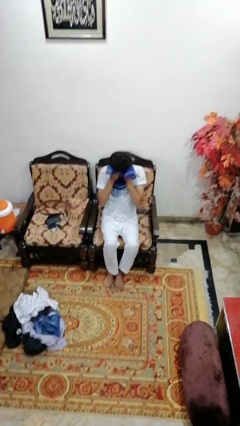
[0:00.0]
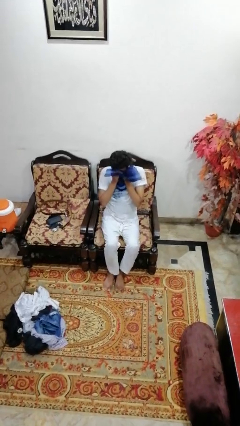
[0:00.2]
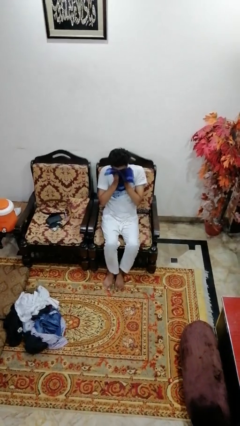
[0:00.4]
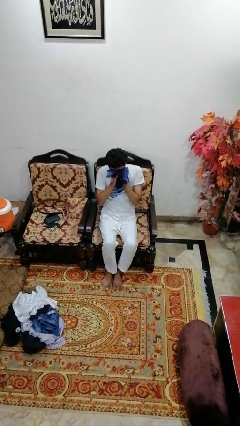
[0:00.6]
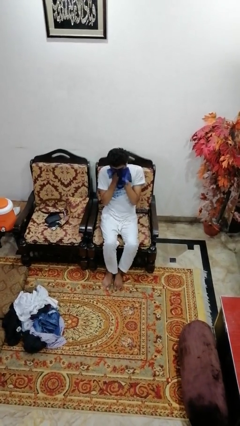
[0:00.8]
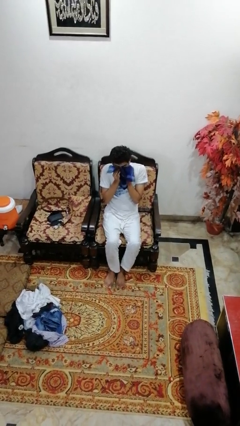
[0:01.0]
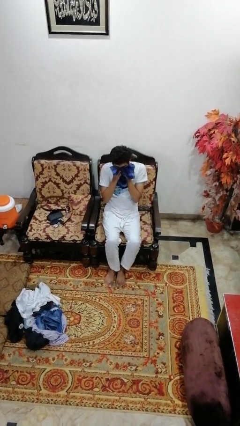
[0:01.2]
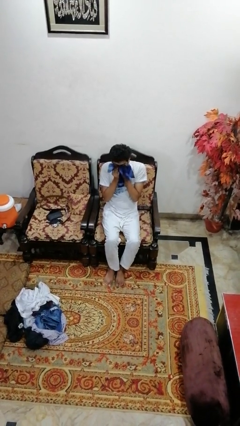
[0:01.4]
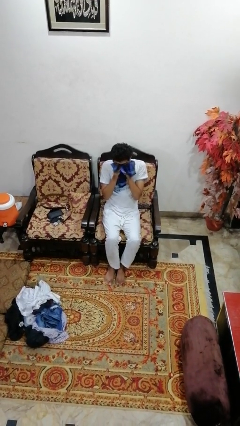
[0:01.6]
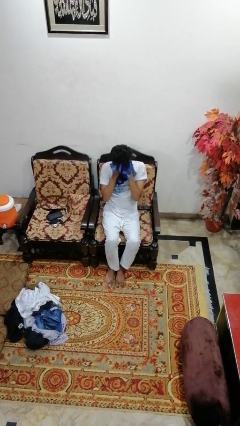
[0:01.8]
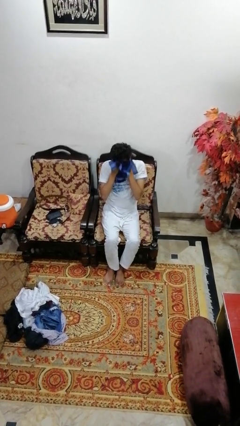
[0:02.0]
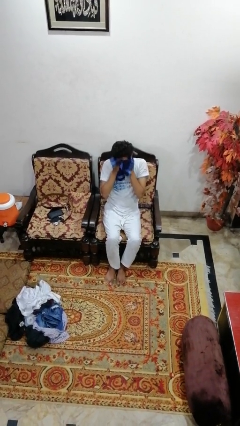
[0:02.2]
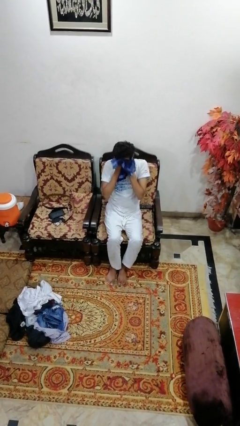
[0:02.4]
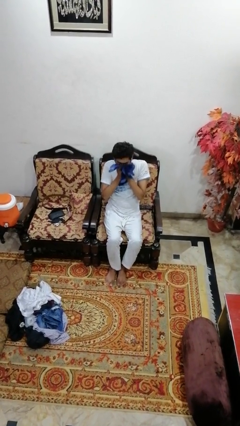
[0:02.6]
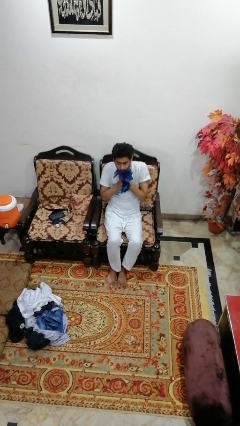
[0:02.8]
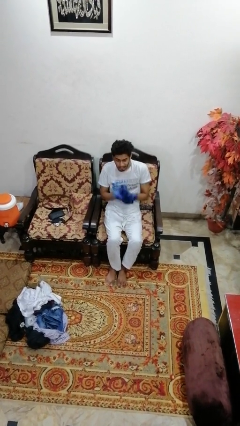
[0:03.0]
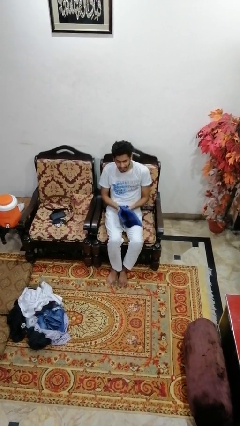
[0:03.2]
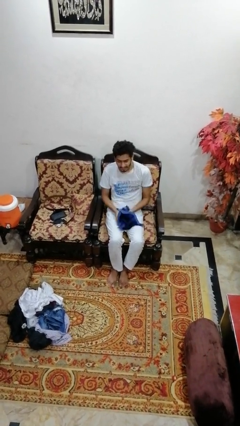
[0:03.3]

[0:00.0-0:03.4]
person wipes mouth with napkin

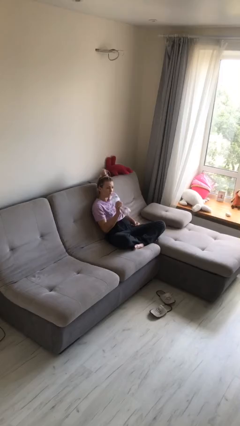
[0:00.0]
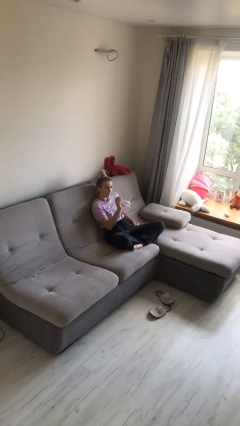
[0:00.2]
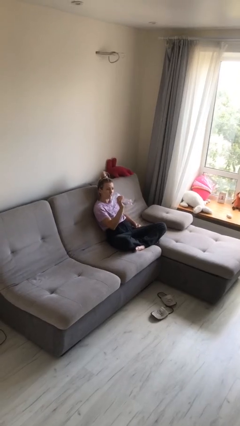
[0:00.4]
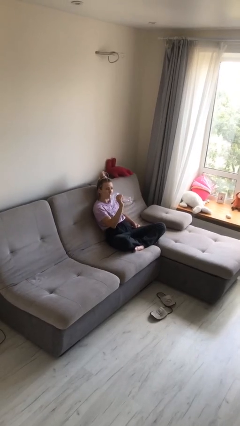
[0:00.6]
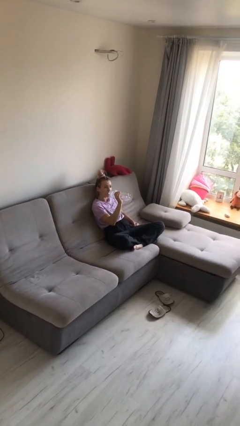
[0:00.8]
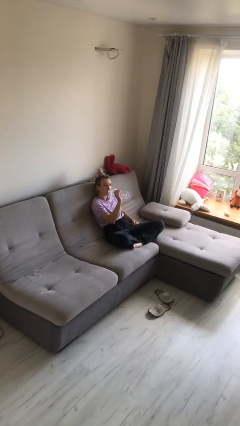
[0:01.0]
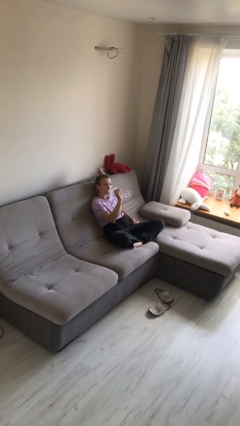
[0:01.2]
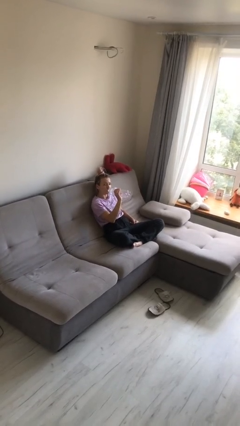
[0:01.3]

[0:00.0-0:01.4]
person drinks from bottle

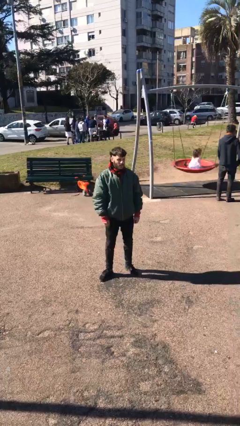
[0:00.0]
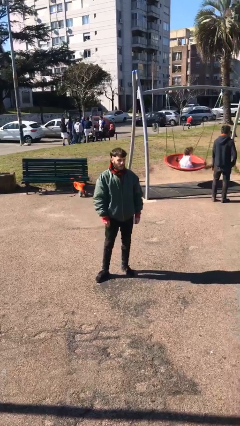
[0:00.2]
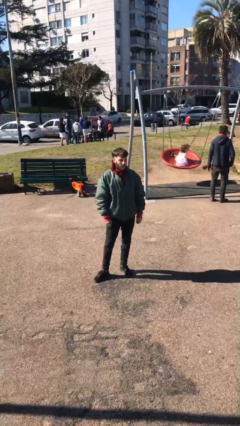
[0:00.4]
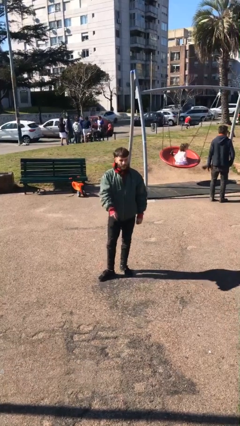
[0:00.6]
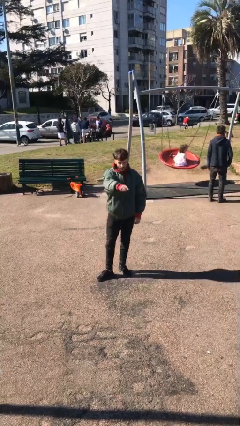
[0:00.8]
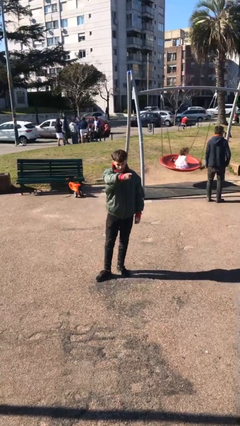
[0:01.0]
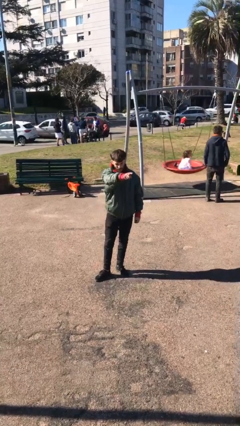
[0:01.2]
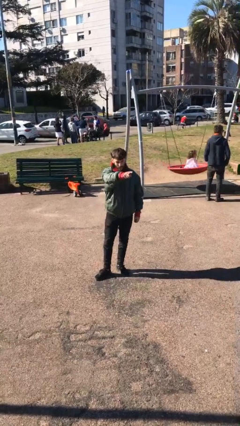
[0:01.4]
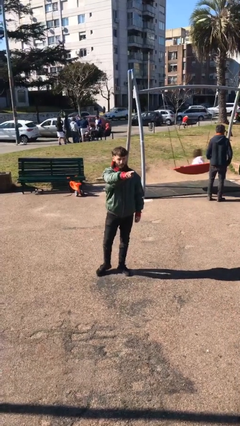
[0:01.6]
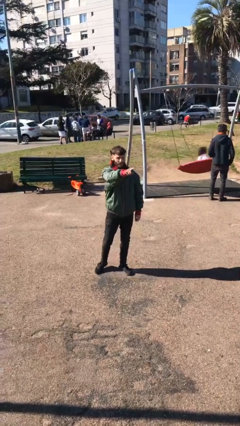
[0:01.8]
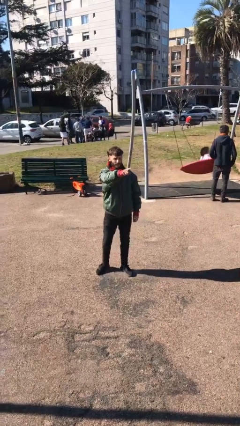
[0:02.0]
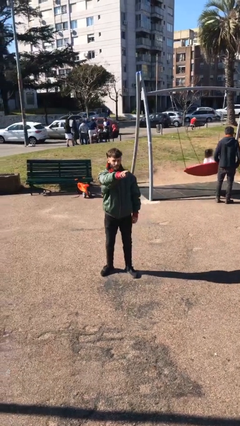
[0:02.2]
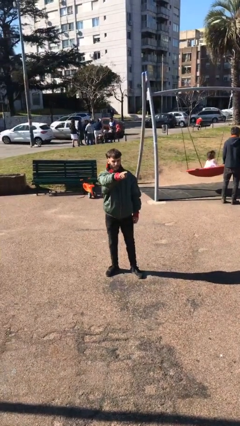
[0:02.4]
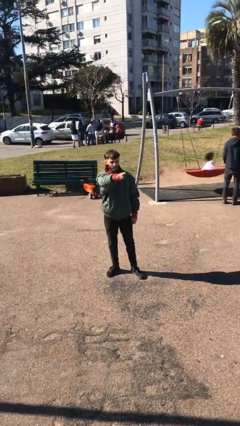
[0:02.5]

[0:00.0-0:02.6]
person points at person

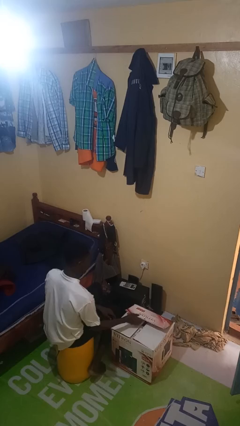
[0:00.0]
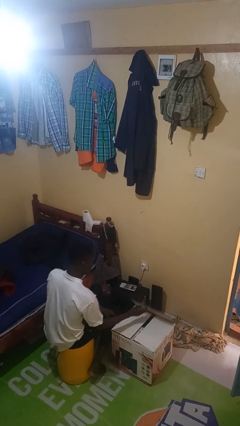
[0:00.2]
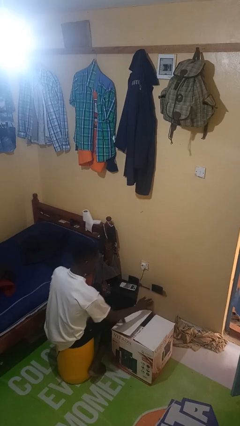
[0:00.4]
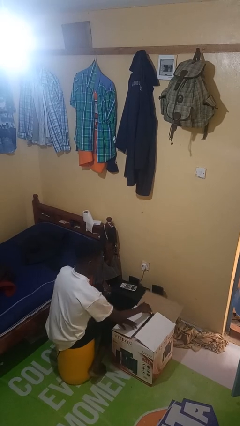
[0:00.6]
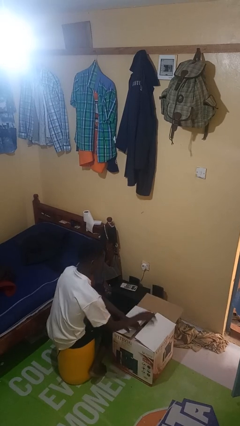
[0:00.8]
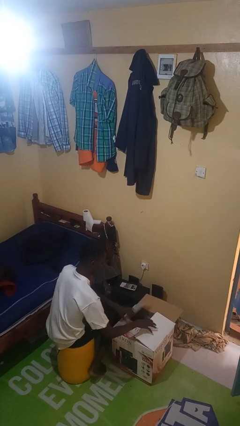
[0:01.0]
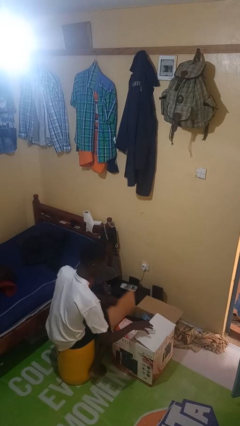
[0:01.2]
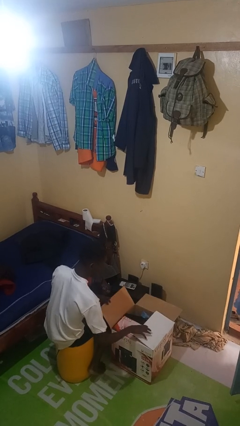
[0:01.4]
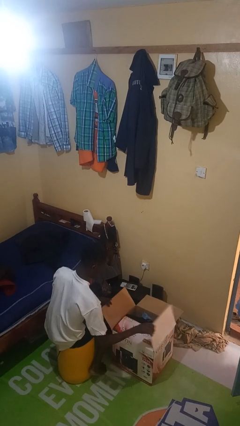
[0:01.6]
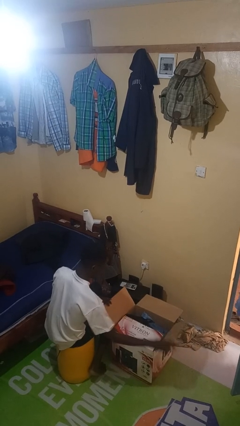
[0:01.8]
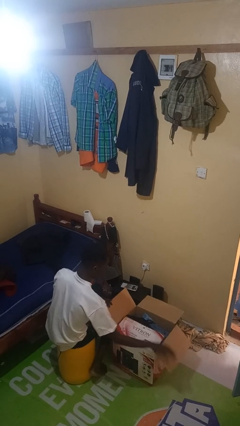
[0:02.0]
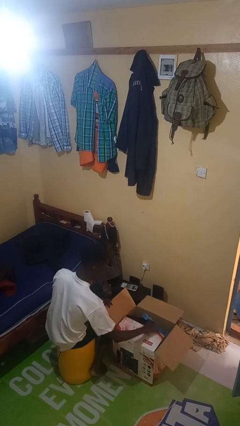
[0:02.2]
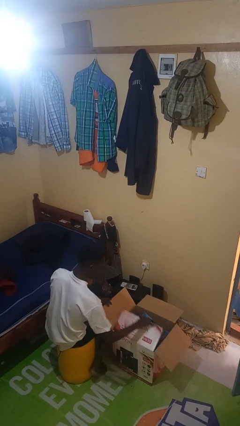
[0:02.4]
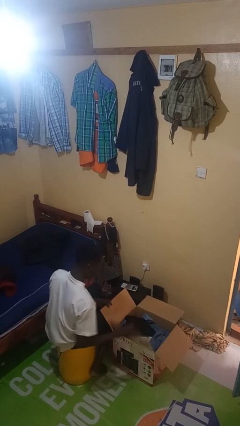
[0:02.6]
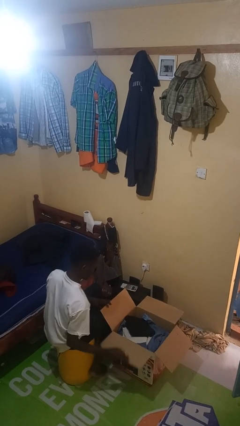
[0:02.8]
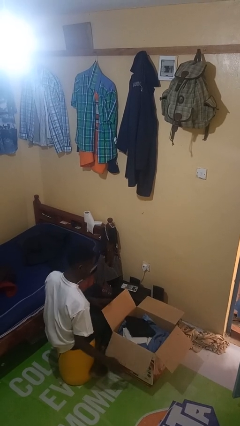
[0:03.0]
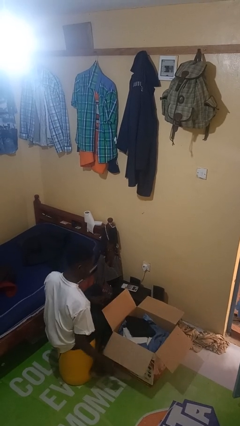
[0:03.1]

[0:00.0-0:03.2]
person opens box

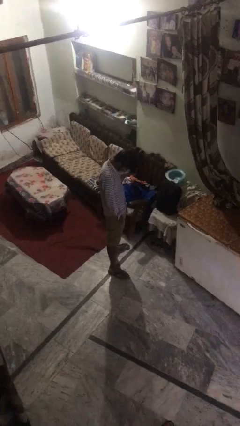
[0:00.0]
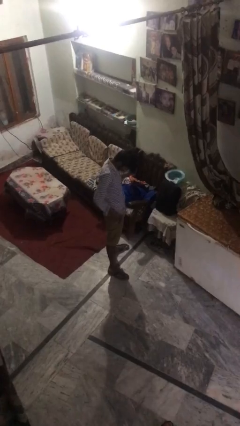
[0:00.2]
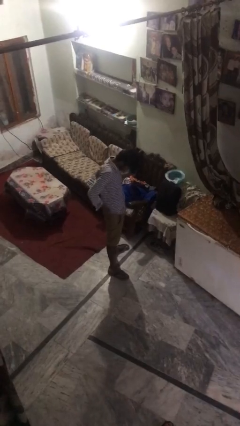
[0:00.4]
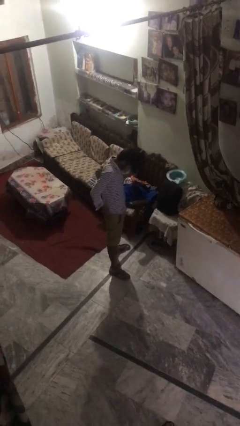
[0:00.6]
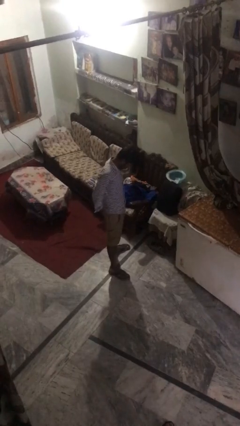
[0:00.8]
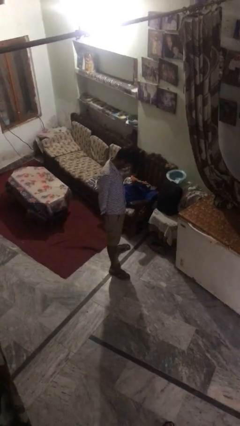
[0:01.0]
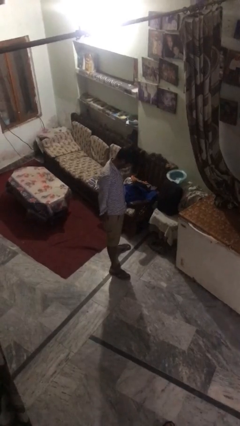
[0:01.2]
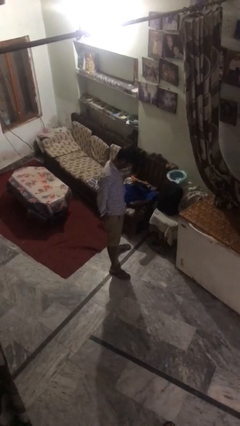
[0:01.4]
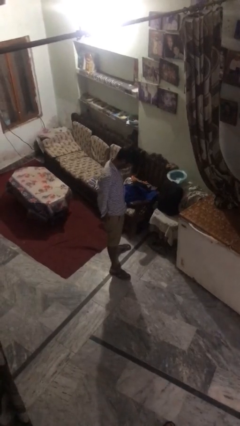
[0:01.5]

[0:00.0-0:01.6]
person puts hands in back pockets

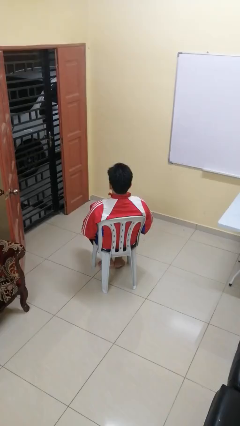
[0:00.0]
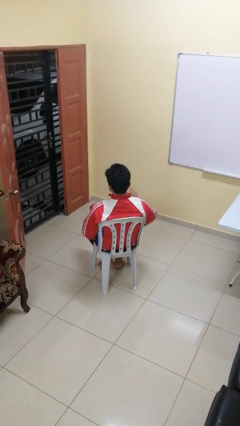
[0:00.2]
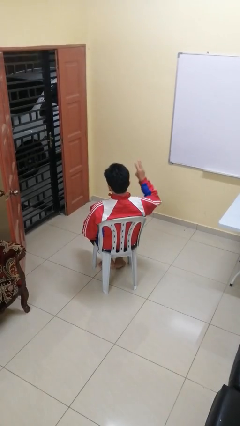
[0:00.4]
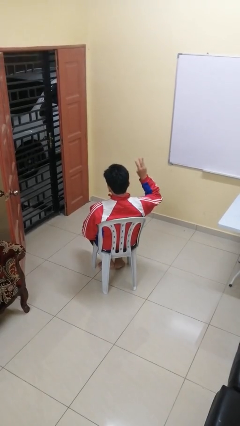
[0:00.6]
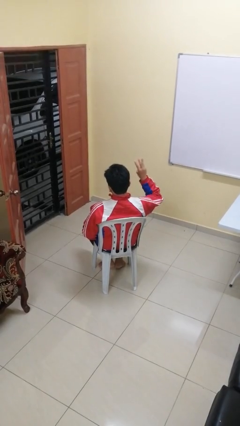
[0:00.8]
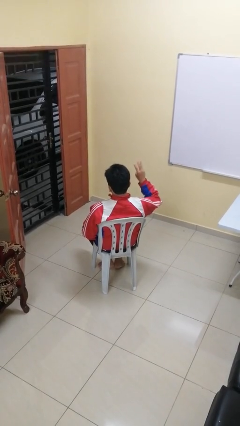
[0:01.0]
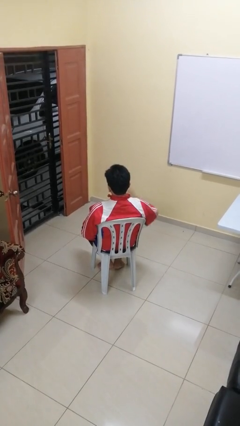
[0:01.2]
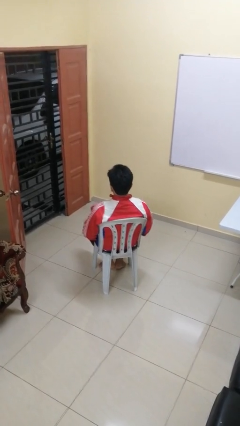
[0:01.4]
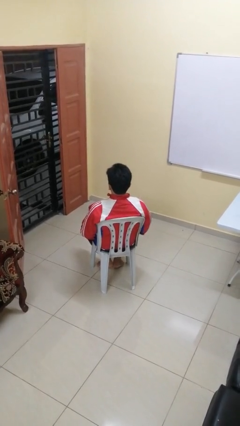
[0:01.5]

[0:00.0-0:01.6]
person gestures number three

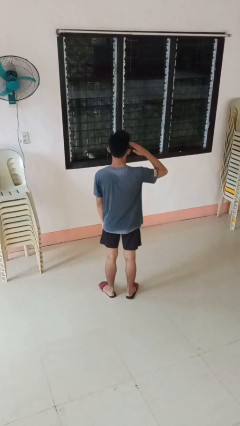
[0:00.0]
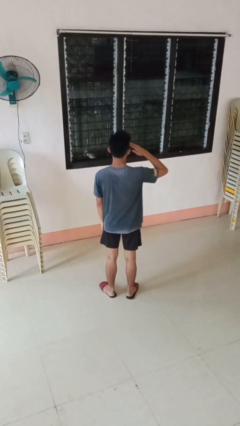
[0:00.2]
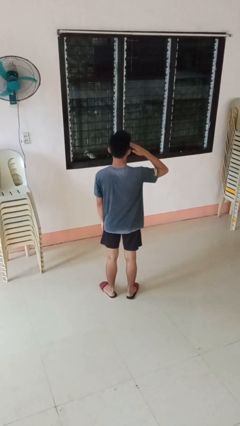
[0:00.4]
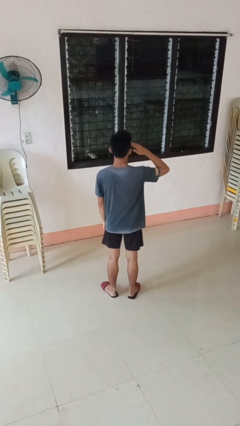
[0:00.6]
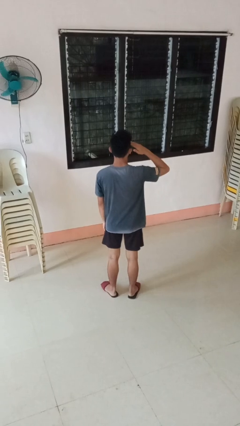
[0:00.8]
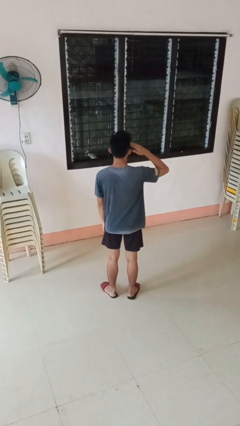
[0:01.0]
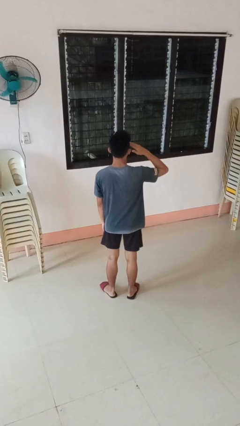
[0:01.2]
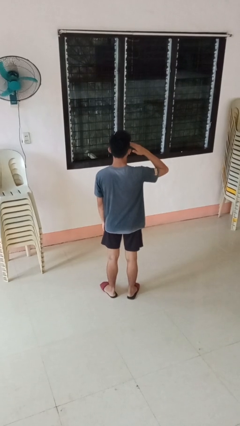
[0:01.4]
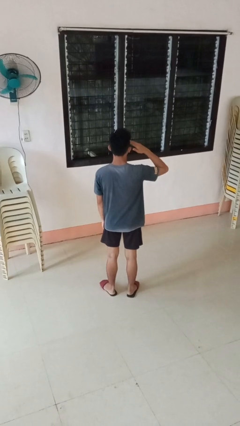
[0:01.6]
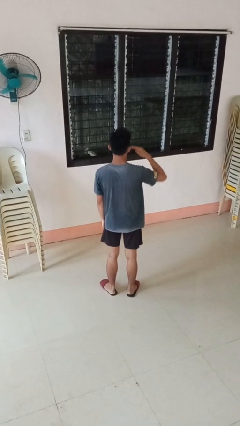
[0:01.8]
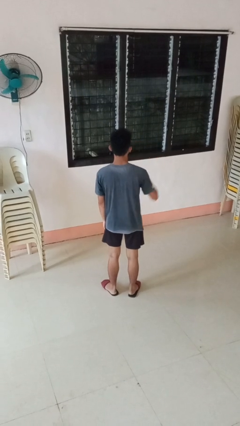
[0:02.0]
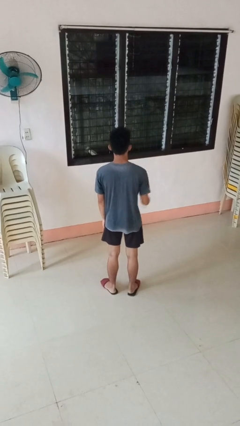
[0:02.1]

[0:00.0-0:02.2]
person salutes

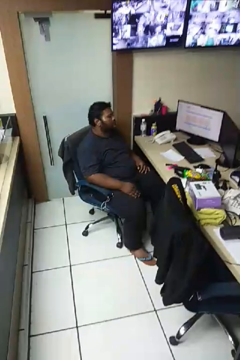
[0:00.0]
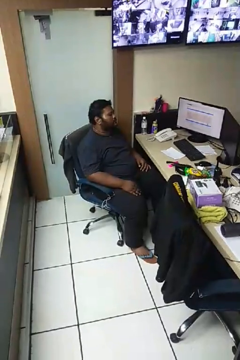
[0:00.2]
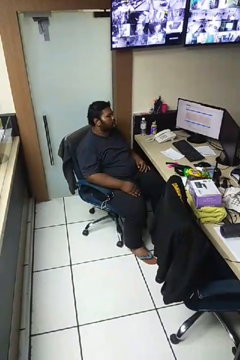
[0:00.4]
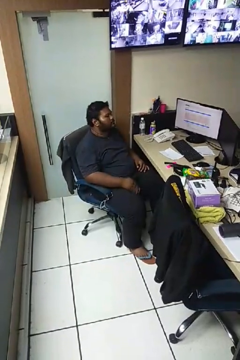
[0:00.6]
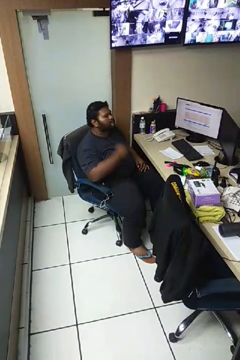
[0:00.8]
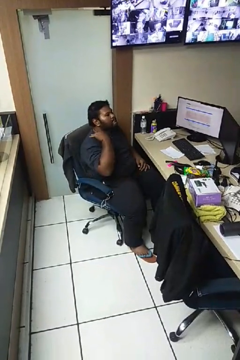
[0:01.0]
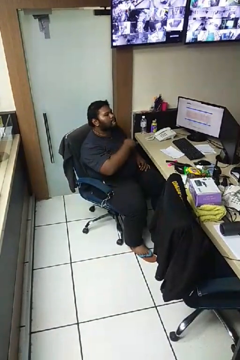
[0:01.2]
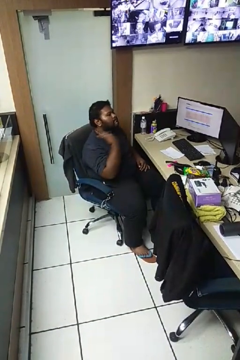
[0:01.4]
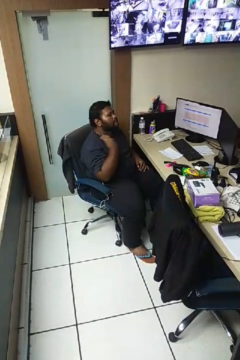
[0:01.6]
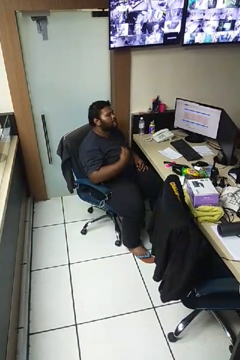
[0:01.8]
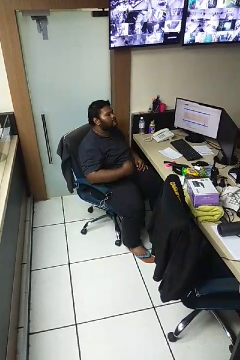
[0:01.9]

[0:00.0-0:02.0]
person gestures cut
